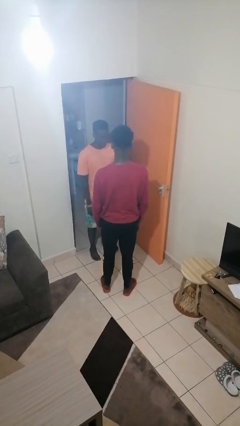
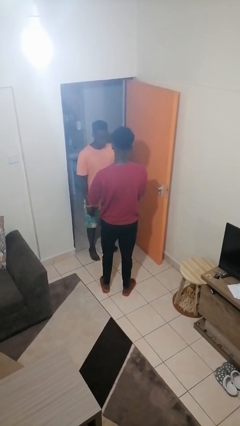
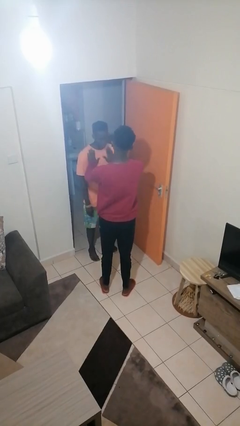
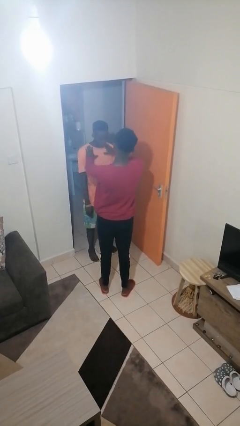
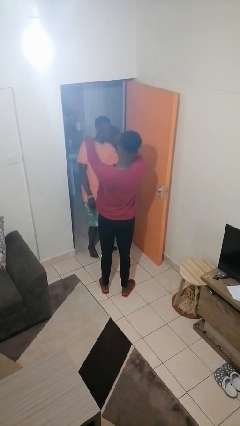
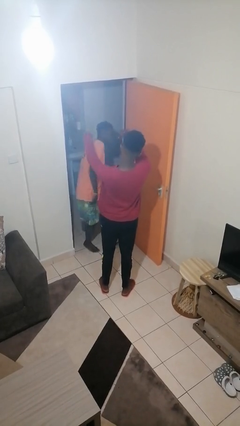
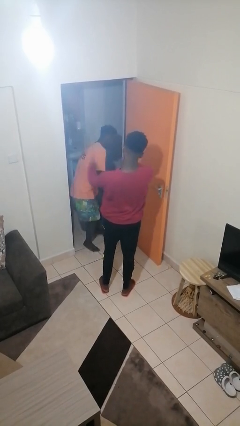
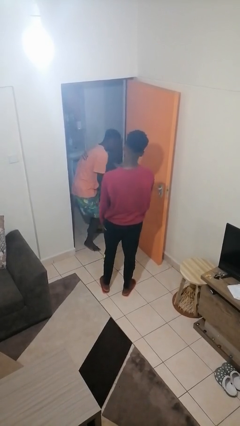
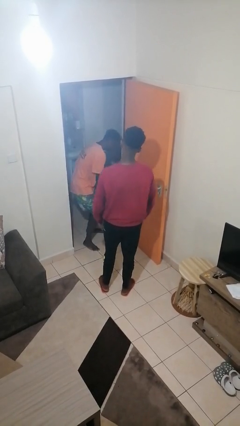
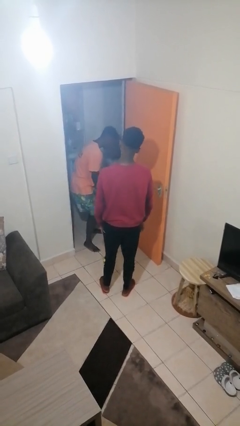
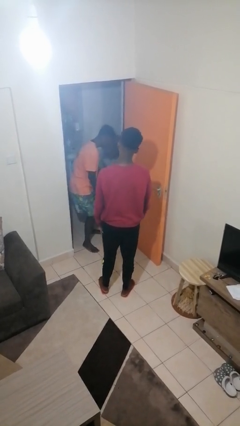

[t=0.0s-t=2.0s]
person shoves person

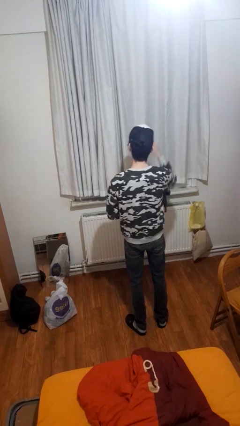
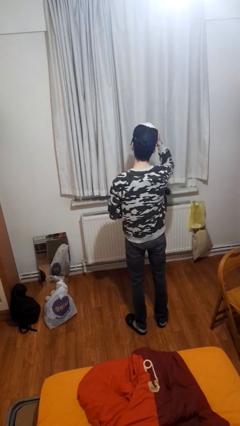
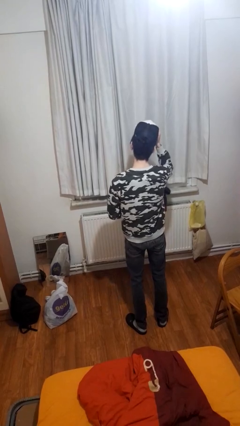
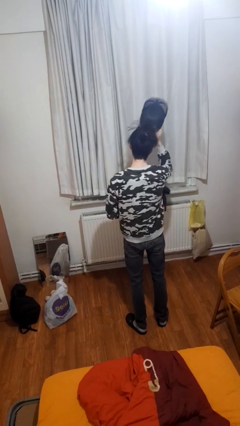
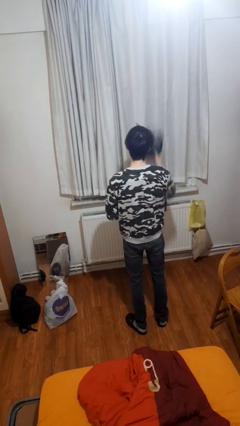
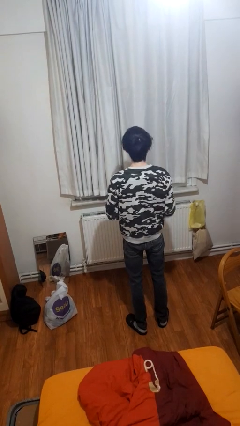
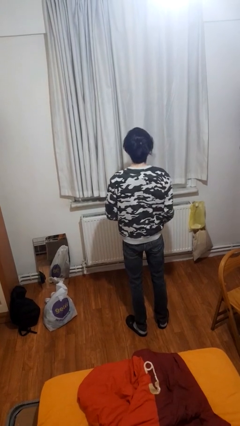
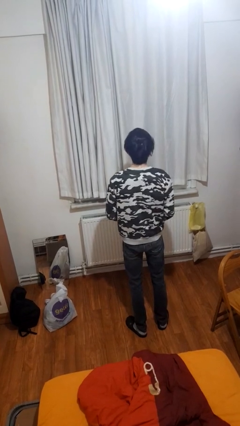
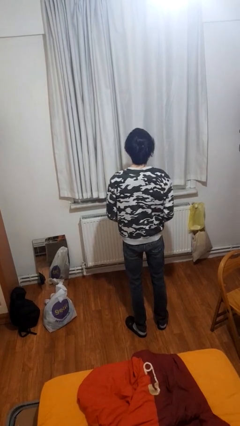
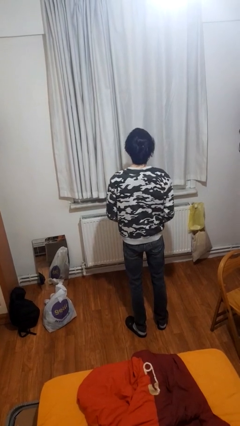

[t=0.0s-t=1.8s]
person takes off hat

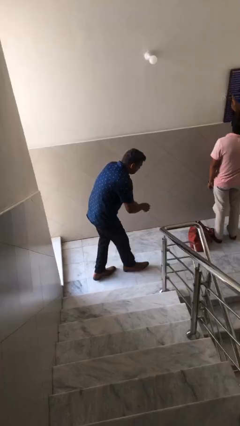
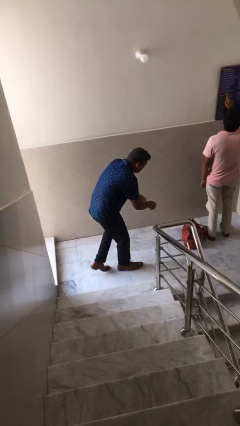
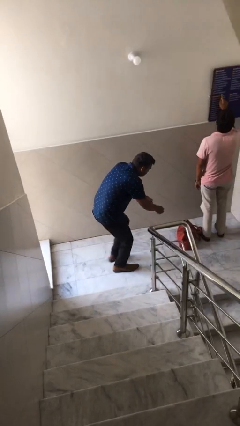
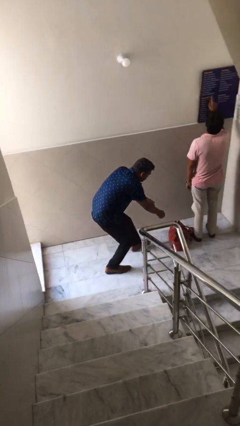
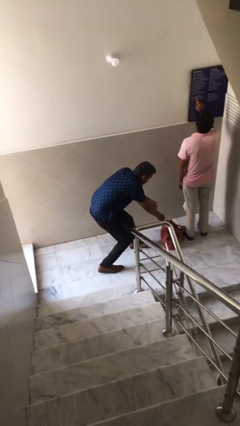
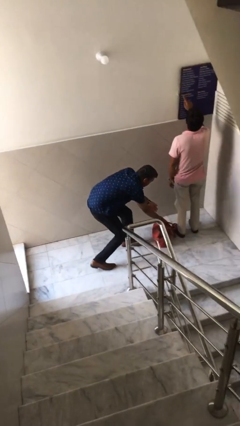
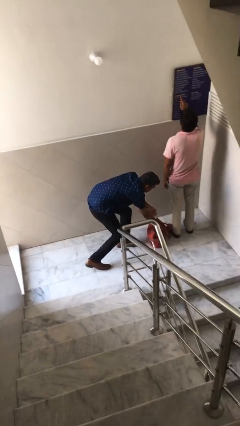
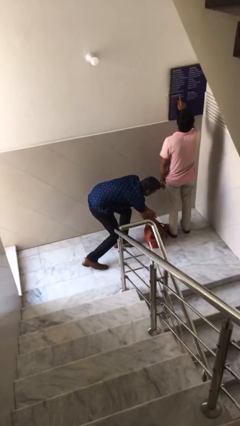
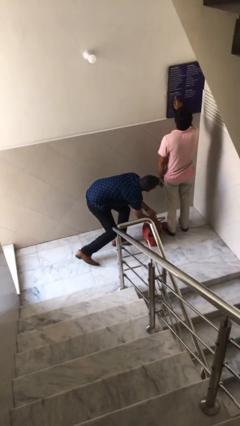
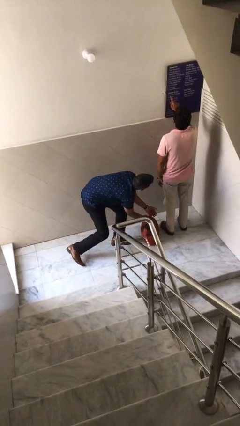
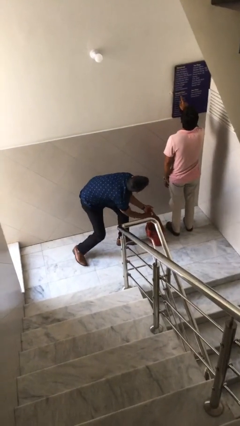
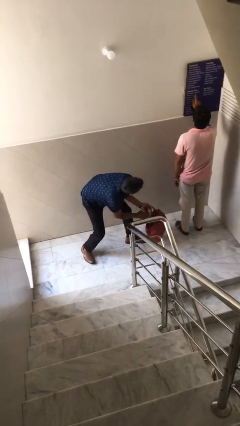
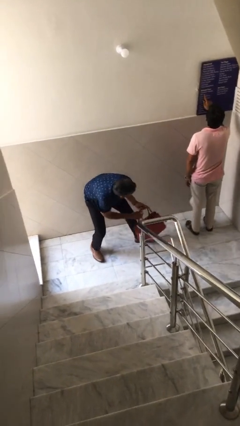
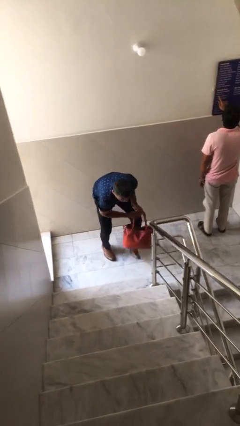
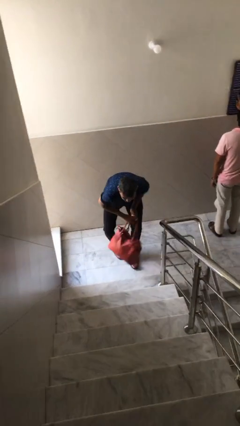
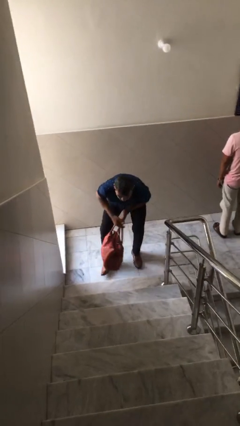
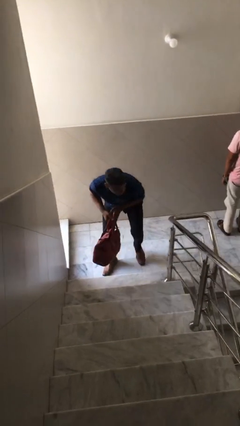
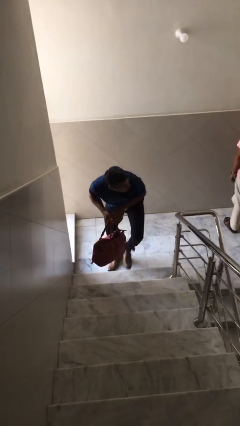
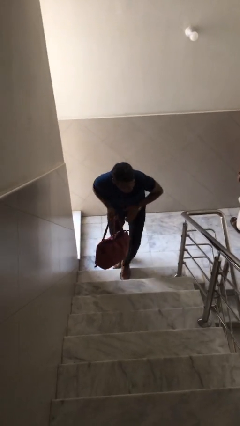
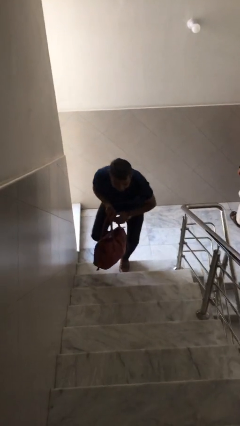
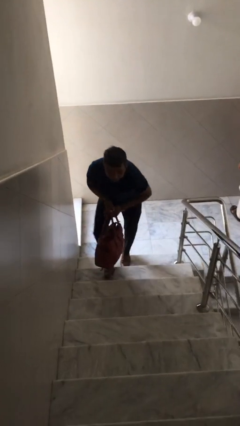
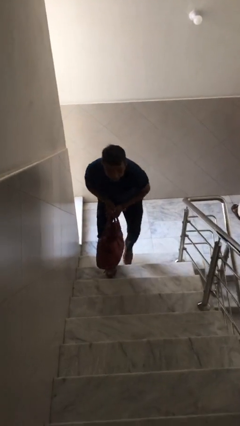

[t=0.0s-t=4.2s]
person steals object from person

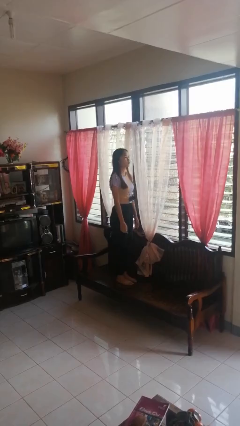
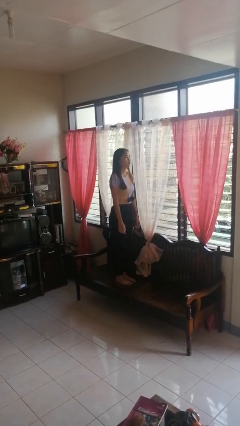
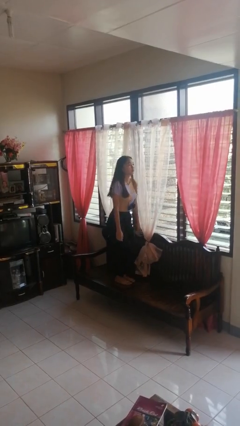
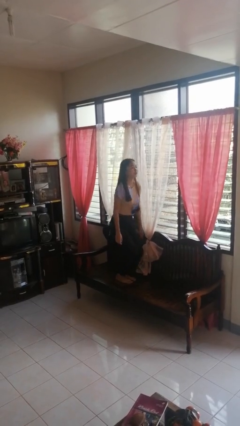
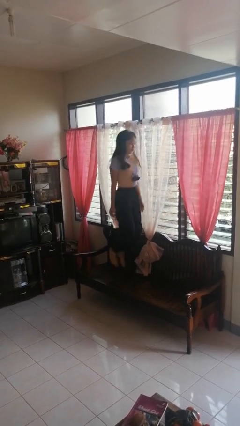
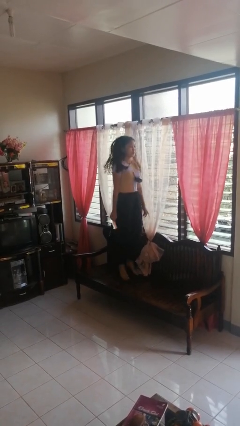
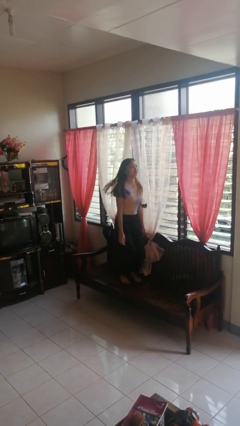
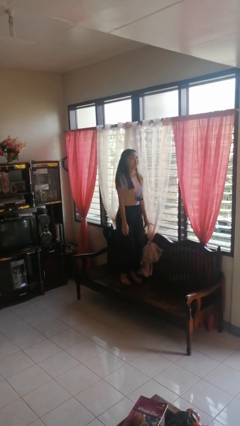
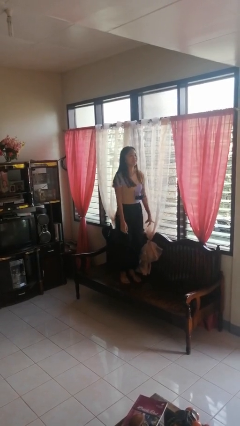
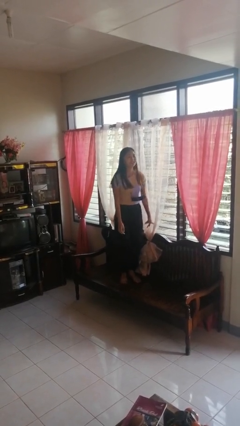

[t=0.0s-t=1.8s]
person jumps on couch

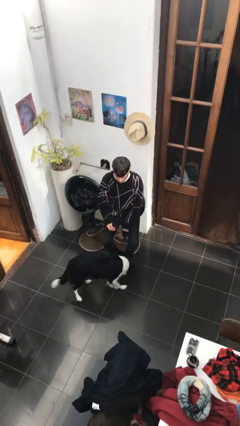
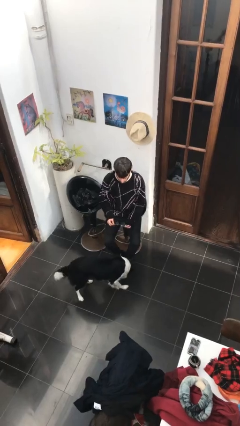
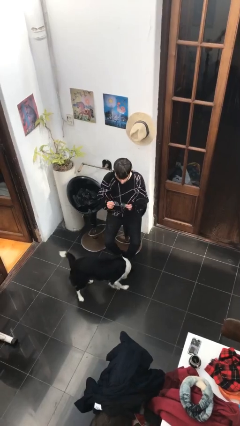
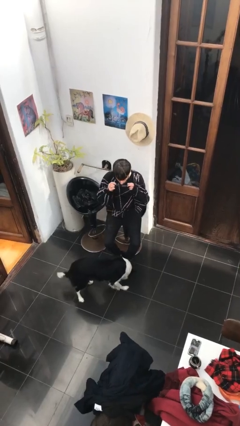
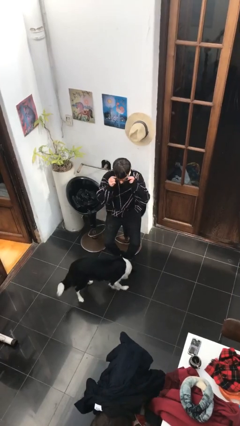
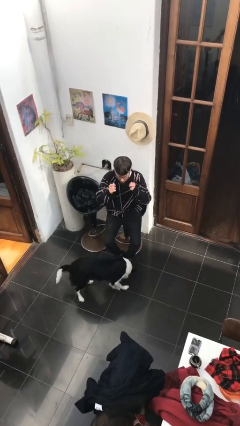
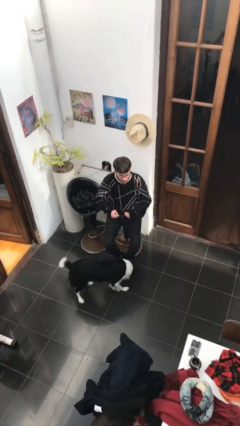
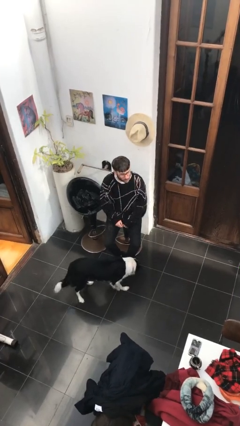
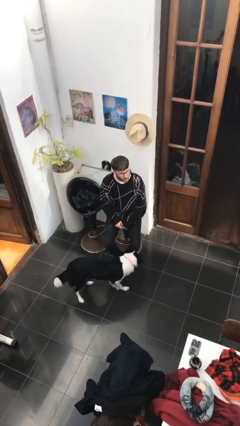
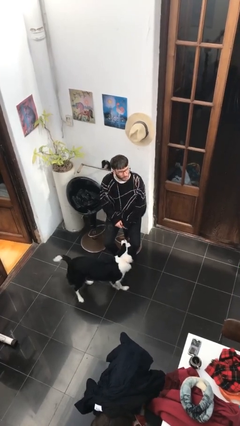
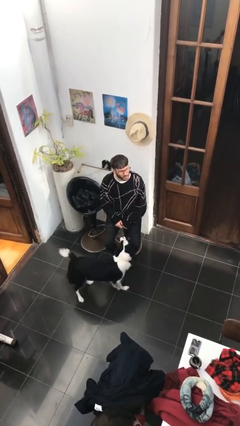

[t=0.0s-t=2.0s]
person puts on glasses

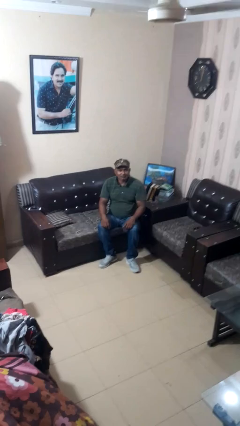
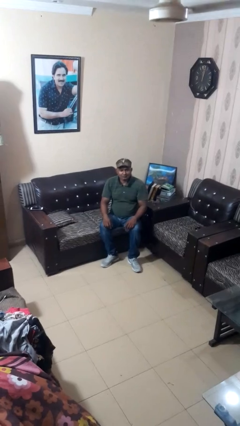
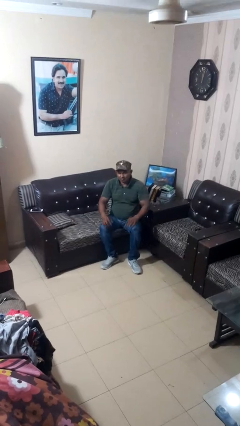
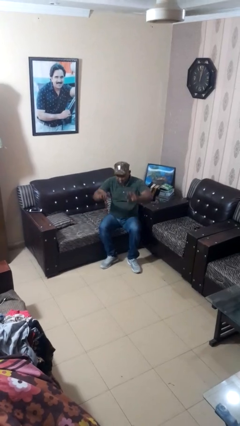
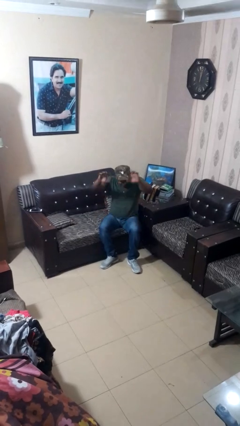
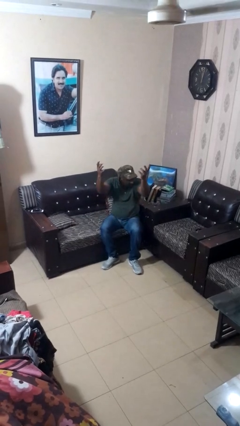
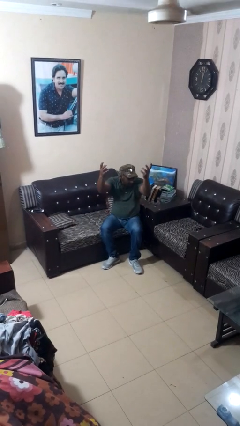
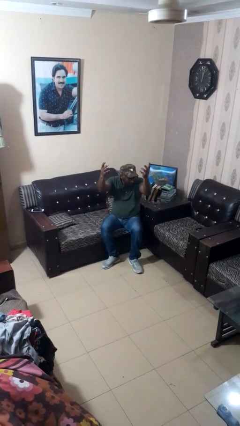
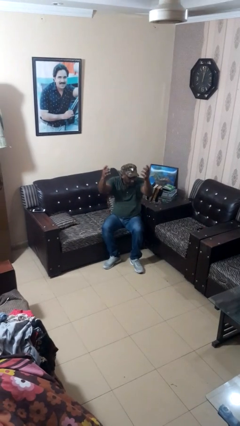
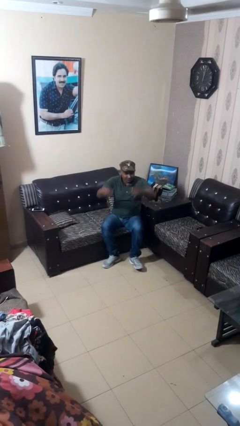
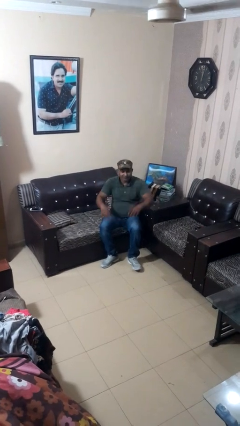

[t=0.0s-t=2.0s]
person shrugs

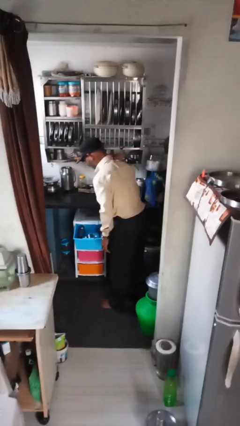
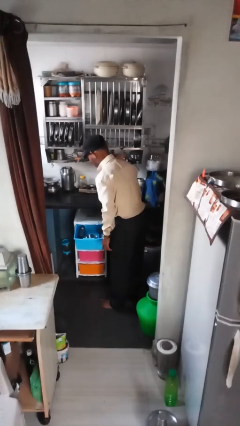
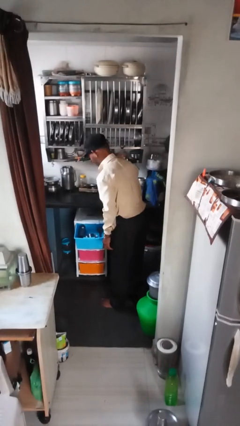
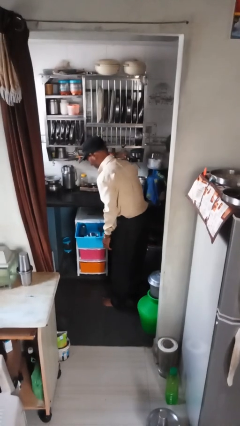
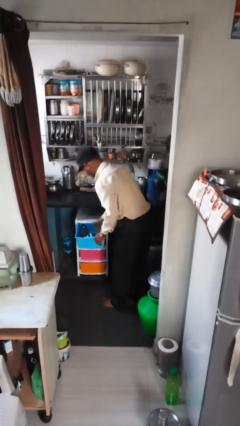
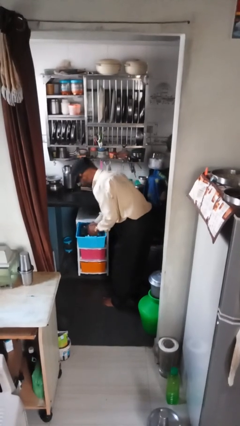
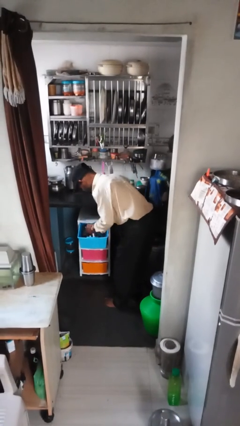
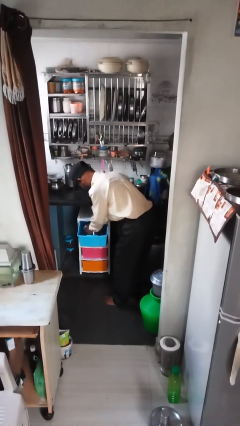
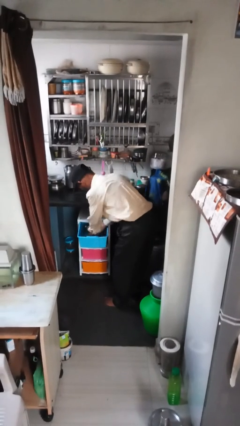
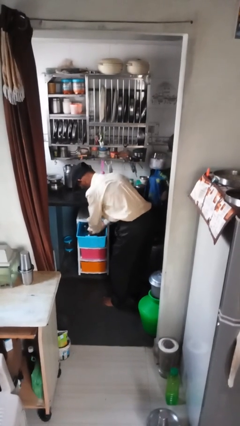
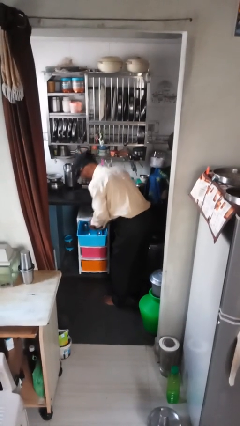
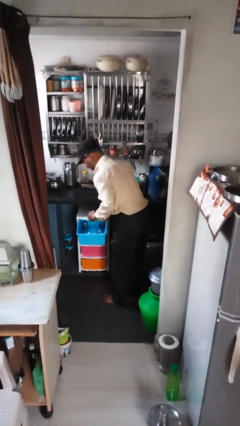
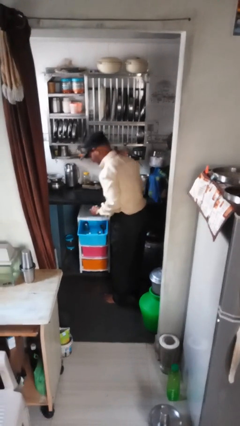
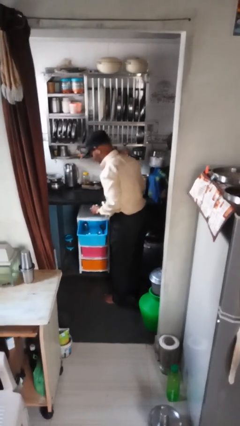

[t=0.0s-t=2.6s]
person takes object from kitchen drawer

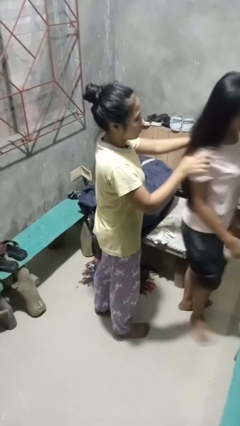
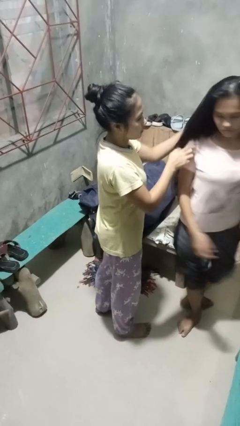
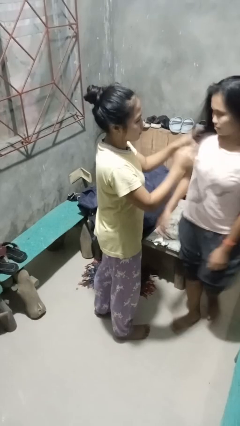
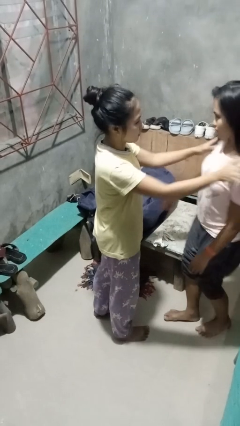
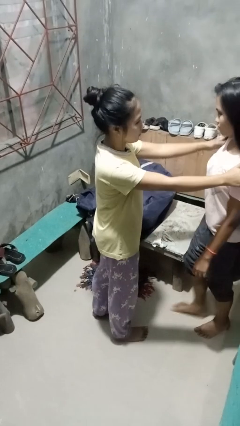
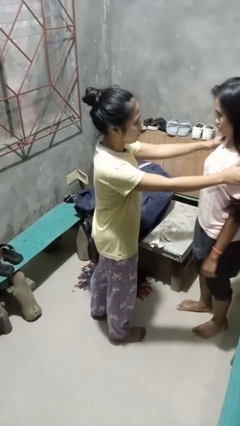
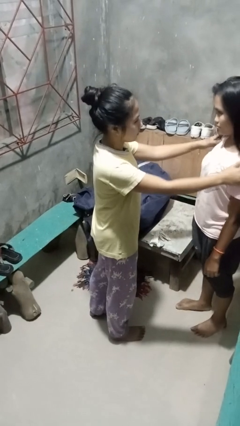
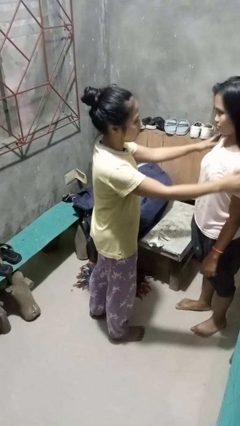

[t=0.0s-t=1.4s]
person spins person around
